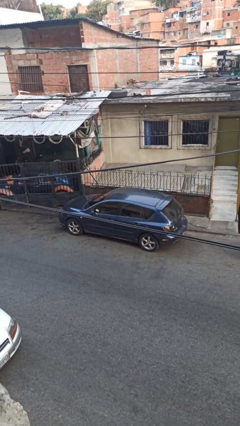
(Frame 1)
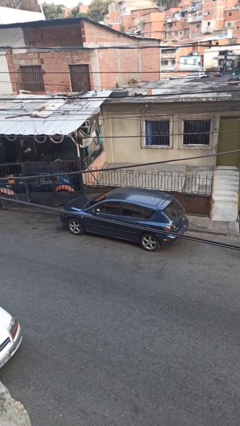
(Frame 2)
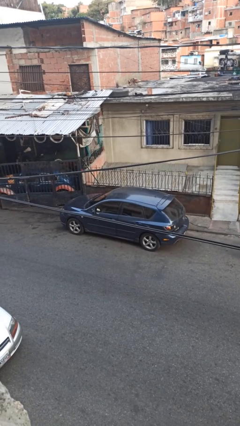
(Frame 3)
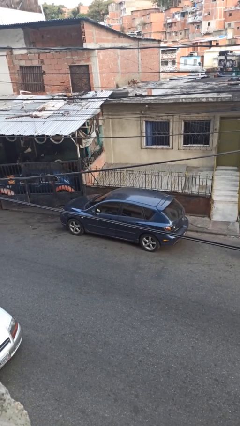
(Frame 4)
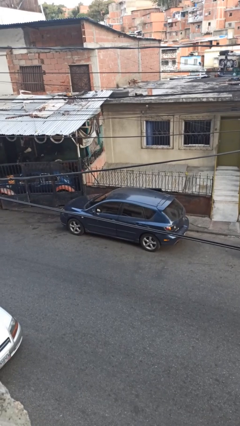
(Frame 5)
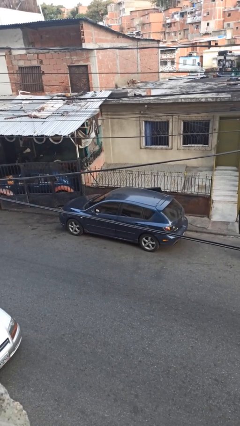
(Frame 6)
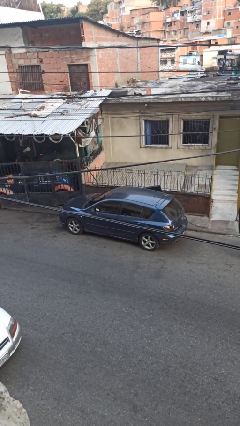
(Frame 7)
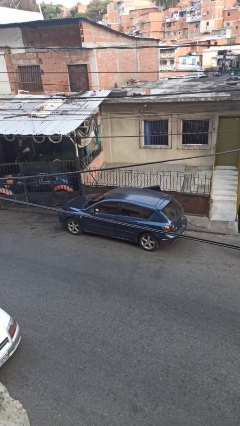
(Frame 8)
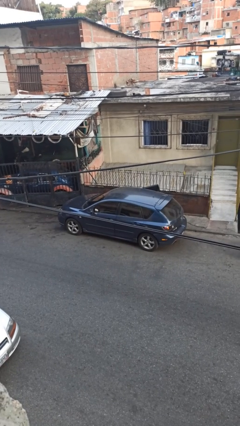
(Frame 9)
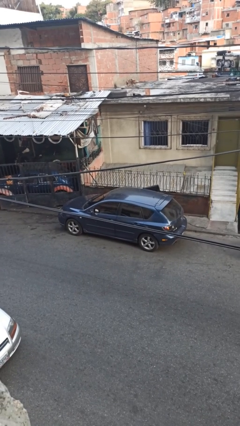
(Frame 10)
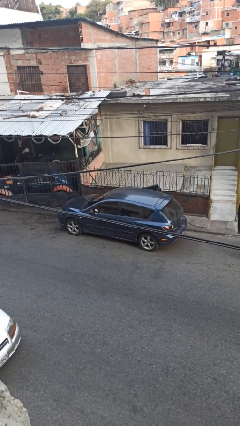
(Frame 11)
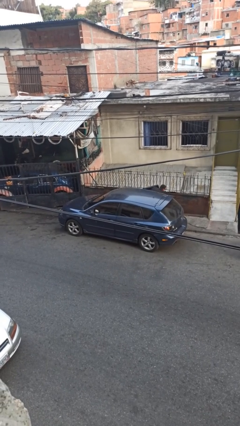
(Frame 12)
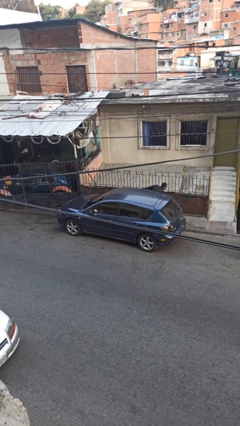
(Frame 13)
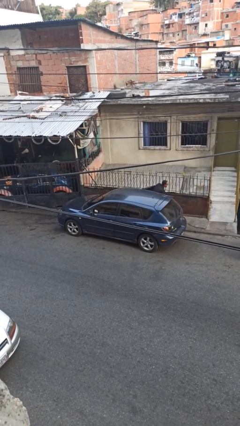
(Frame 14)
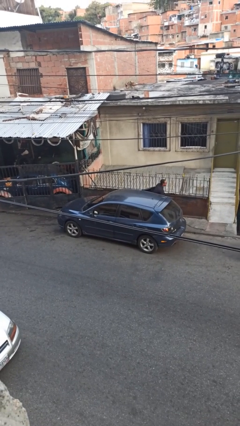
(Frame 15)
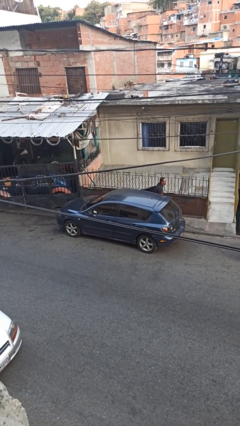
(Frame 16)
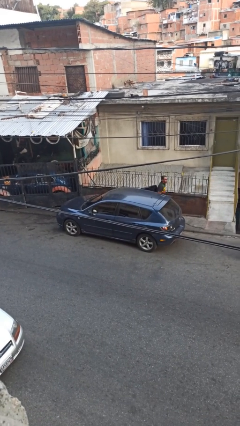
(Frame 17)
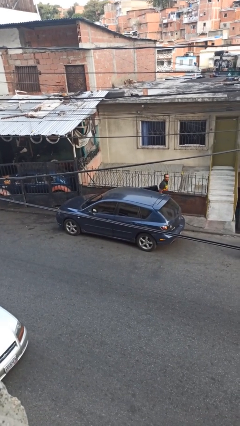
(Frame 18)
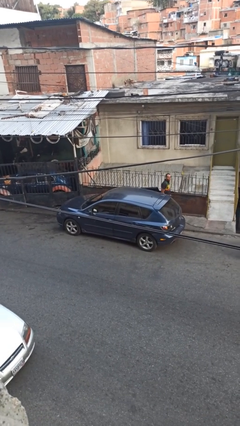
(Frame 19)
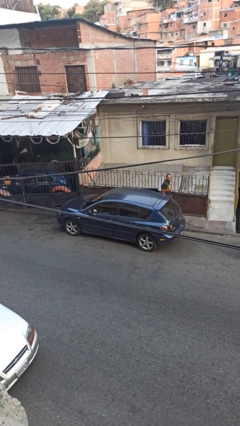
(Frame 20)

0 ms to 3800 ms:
car drops off person

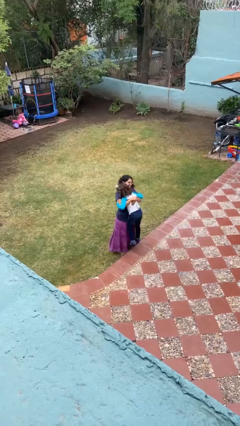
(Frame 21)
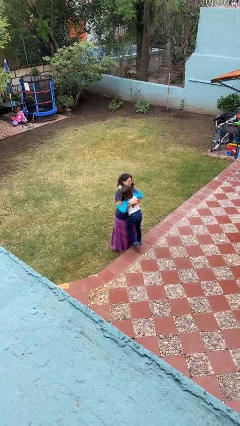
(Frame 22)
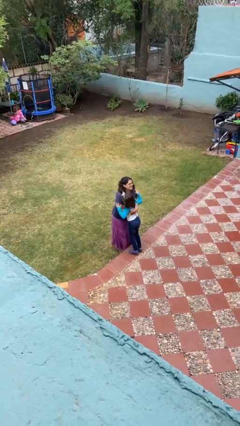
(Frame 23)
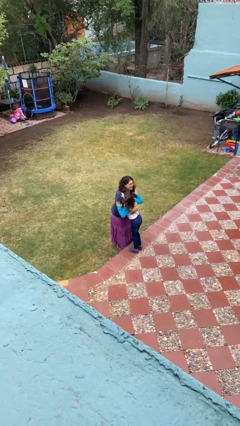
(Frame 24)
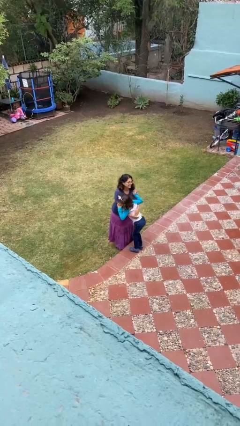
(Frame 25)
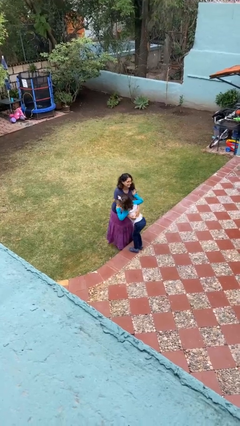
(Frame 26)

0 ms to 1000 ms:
person puts down person

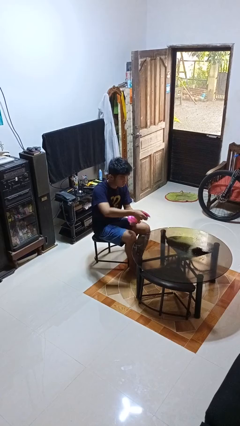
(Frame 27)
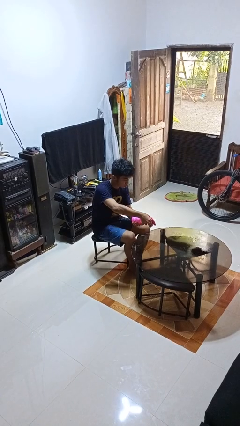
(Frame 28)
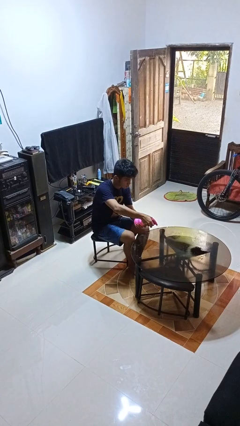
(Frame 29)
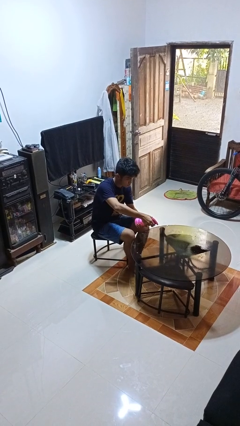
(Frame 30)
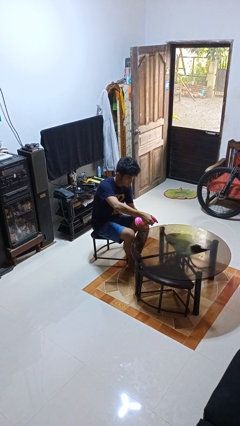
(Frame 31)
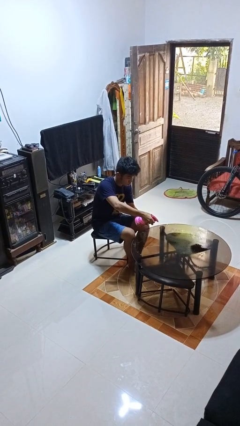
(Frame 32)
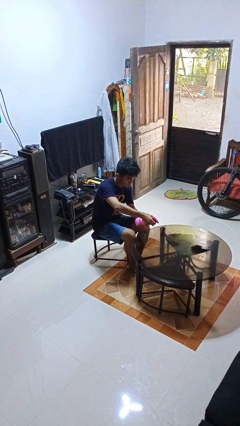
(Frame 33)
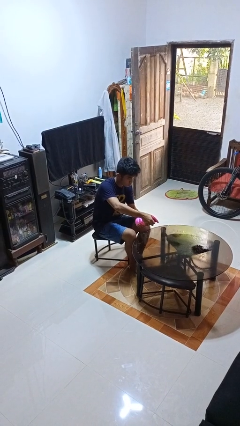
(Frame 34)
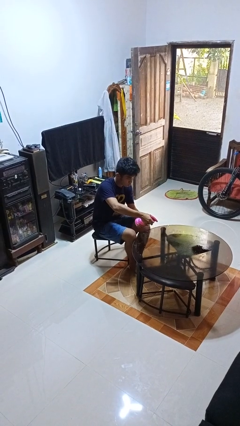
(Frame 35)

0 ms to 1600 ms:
person sprays from bottle

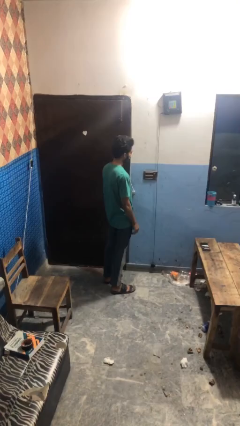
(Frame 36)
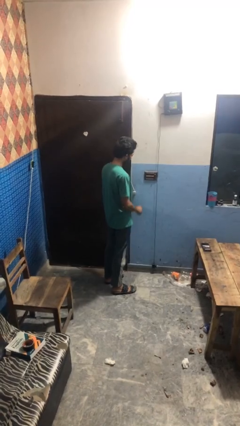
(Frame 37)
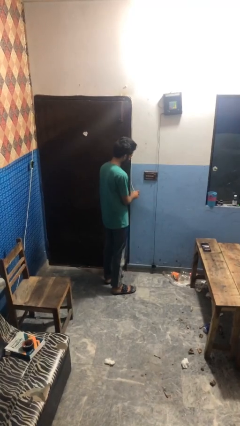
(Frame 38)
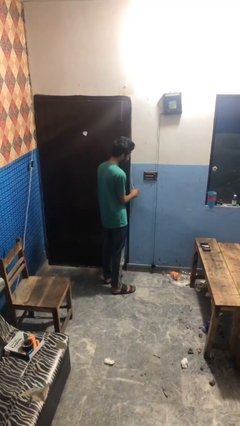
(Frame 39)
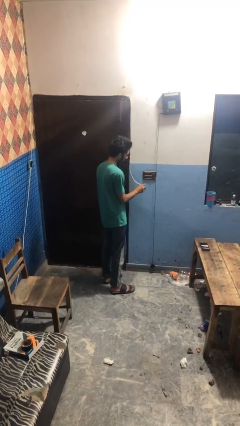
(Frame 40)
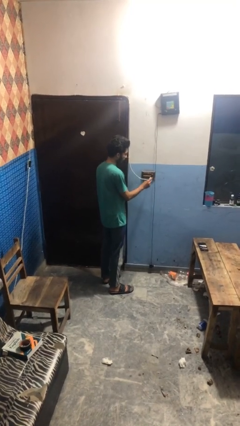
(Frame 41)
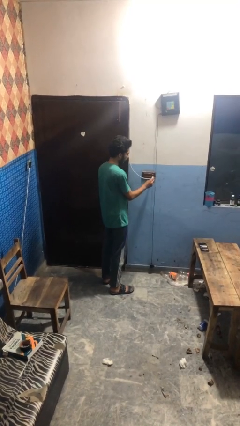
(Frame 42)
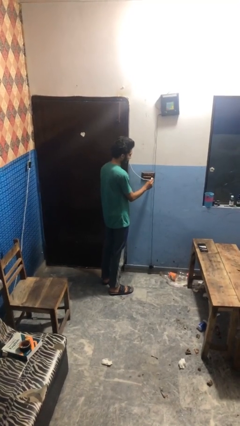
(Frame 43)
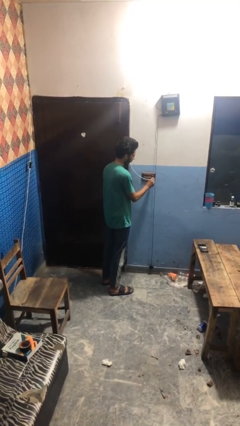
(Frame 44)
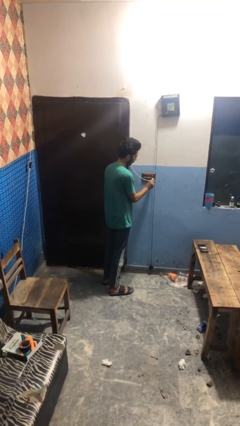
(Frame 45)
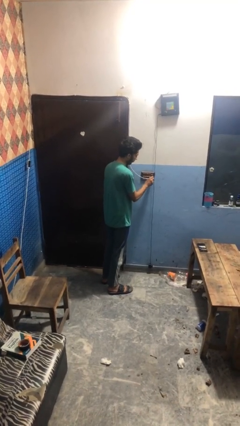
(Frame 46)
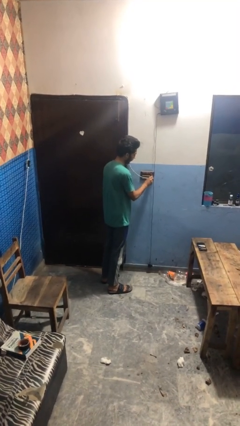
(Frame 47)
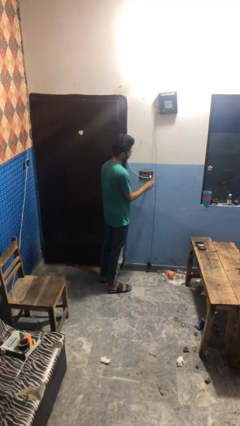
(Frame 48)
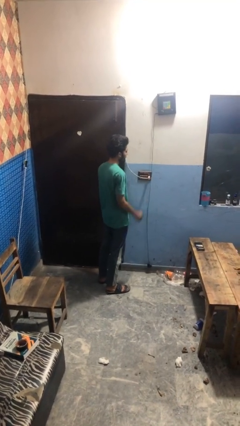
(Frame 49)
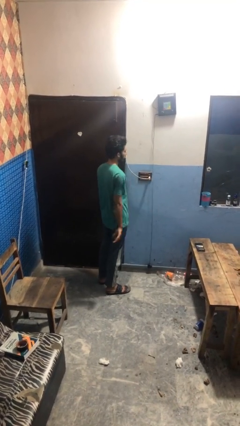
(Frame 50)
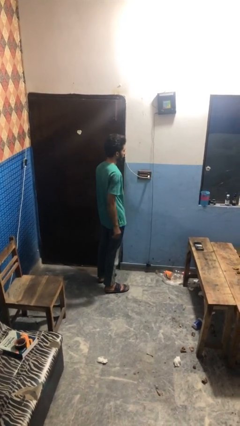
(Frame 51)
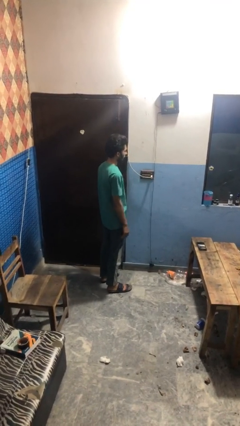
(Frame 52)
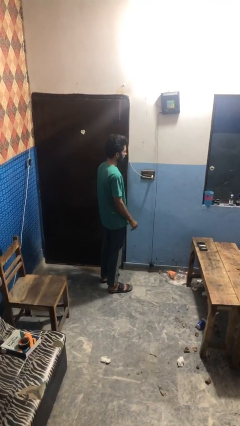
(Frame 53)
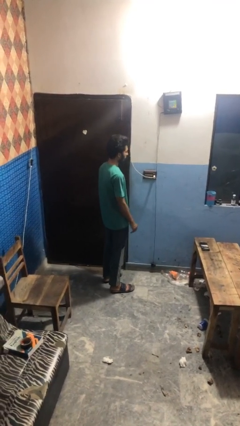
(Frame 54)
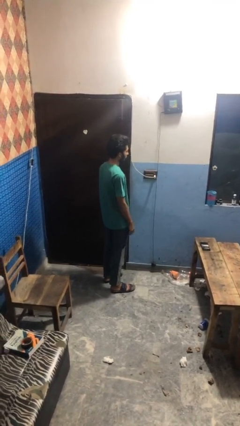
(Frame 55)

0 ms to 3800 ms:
person plugs into electrical socket

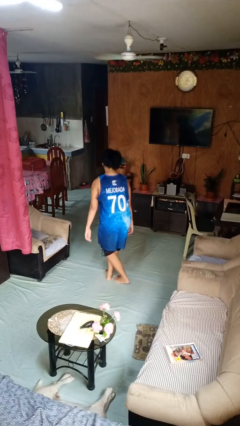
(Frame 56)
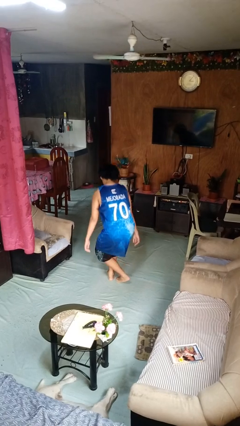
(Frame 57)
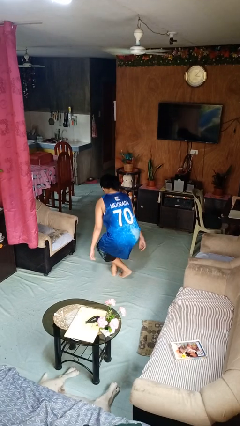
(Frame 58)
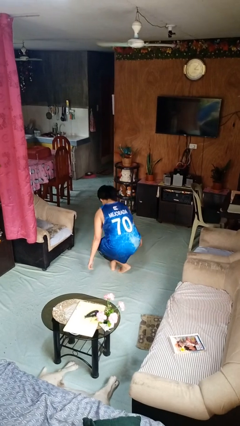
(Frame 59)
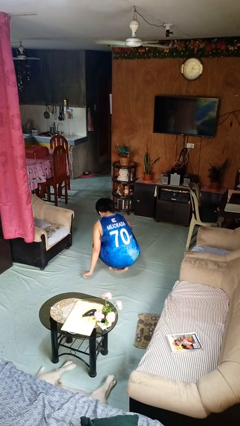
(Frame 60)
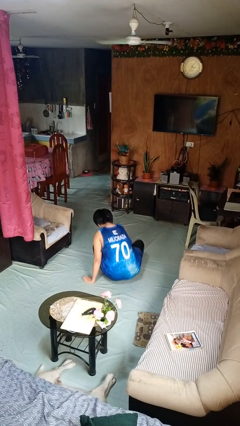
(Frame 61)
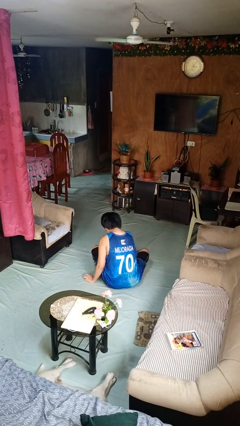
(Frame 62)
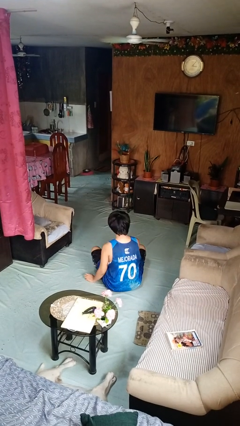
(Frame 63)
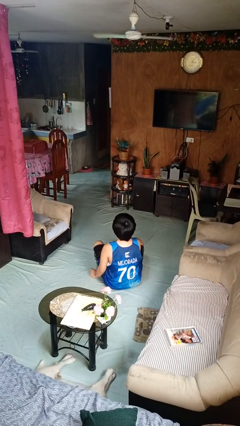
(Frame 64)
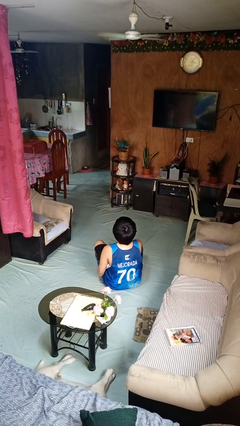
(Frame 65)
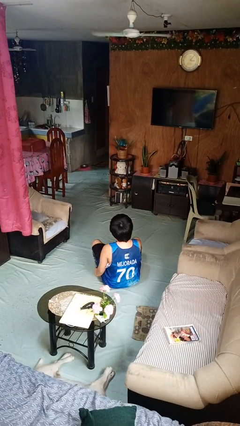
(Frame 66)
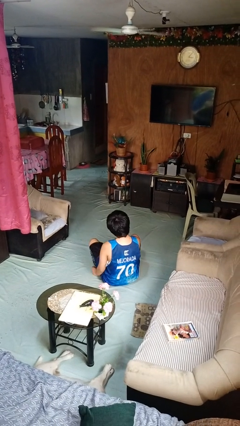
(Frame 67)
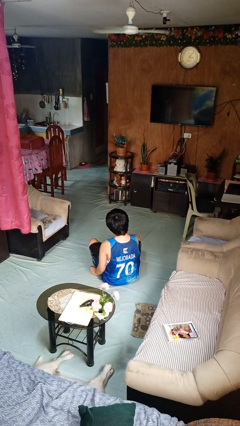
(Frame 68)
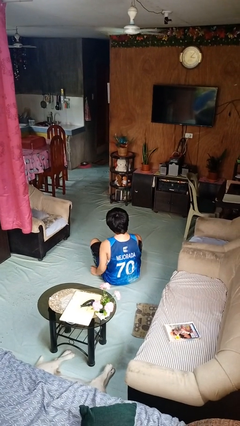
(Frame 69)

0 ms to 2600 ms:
person sits crisscross

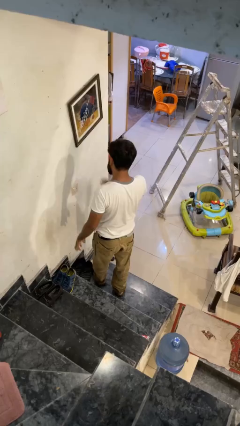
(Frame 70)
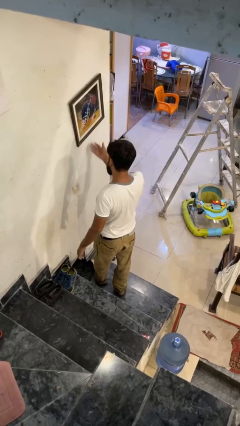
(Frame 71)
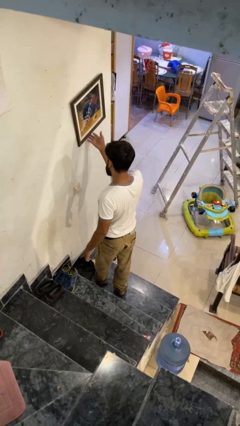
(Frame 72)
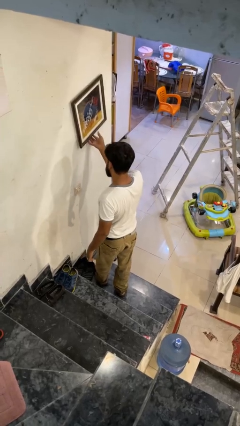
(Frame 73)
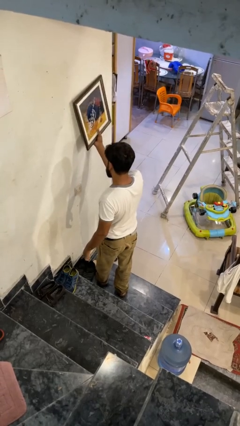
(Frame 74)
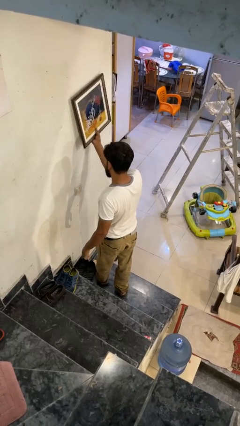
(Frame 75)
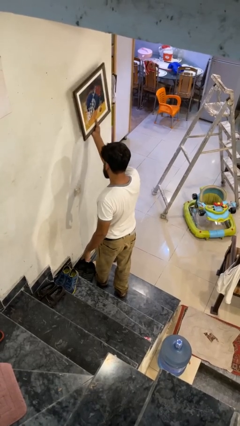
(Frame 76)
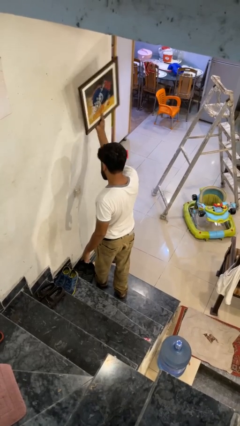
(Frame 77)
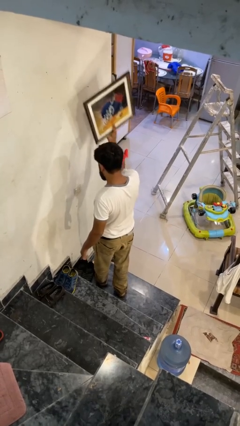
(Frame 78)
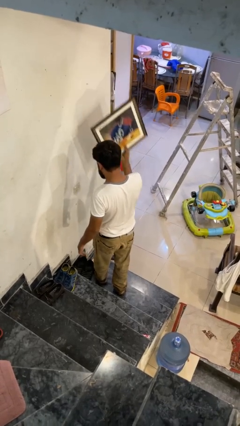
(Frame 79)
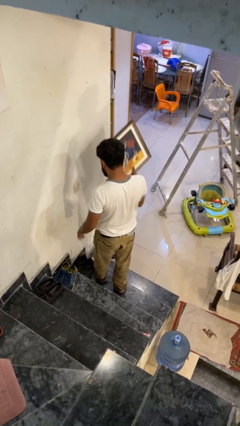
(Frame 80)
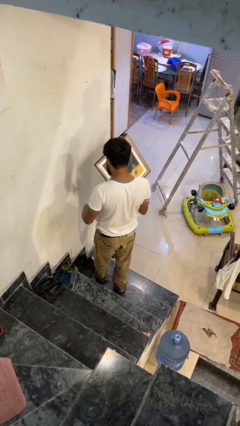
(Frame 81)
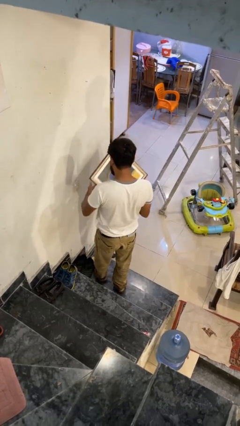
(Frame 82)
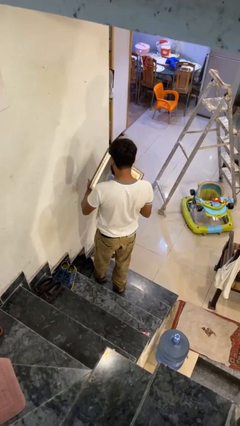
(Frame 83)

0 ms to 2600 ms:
person takes down picture frame

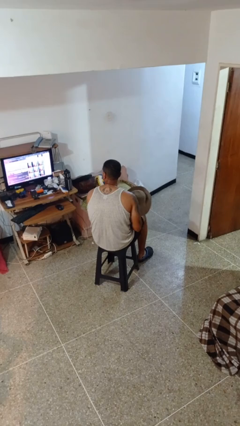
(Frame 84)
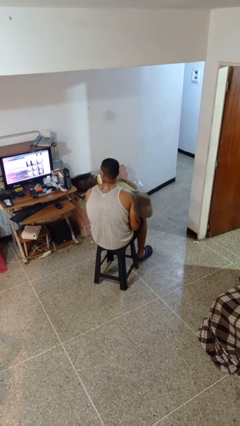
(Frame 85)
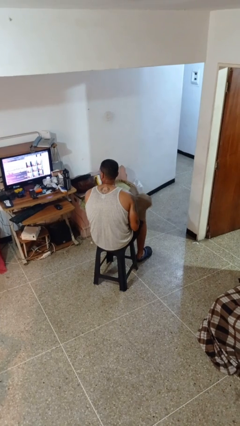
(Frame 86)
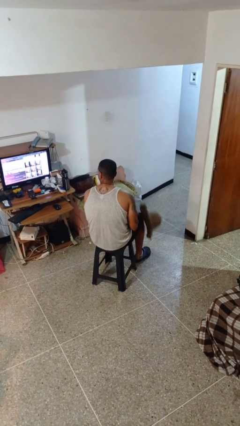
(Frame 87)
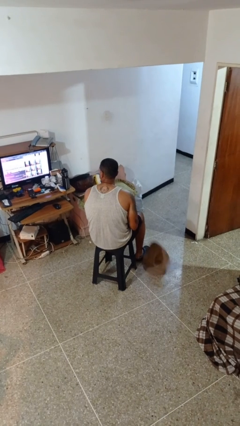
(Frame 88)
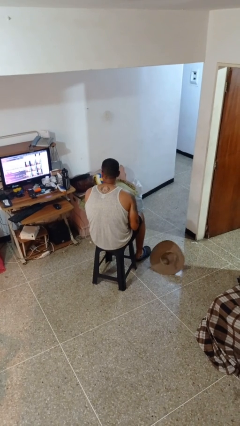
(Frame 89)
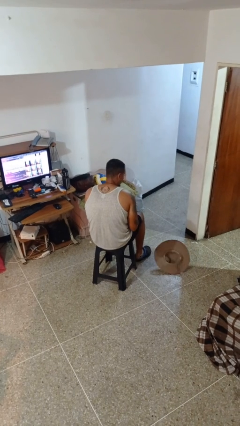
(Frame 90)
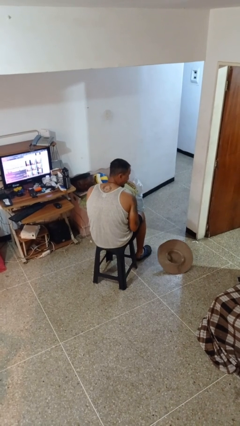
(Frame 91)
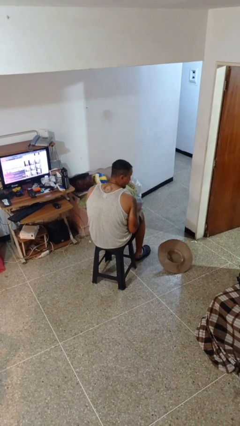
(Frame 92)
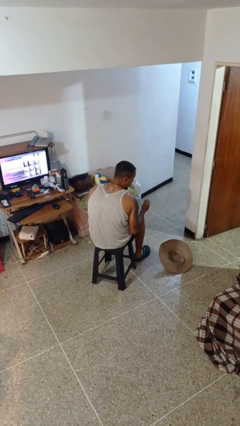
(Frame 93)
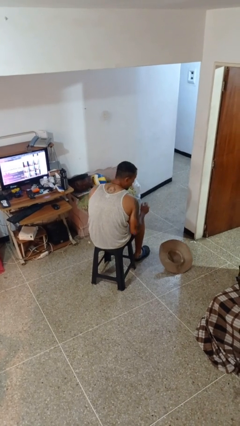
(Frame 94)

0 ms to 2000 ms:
person drops object
